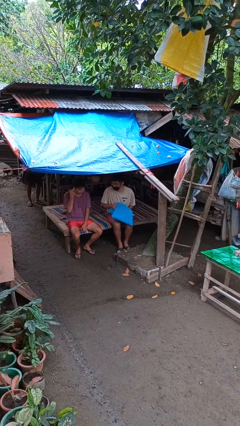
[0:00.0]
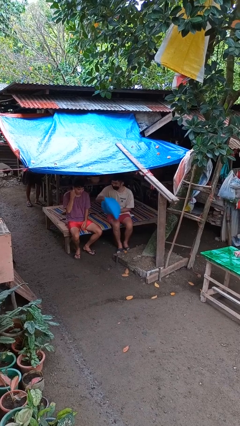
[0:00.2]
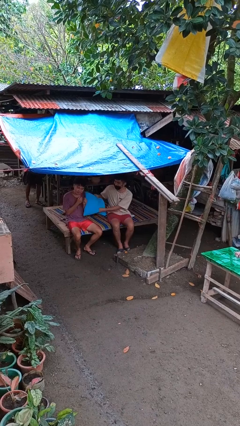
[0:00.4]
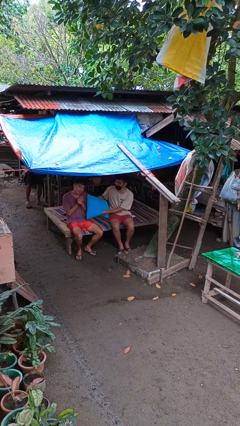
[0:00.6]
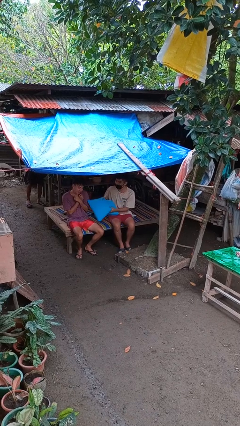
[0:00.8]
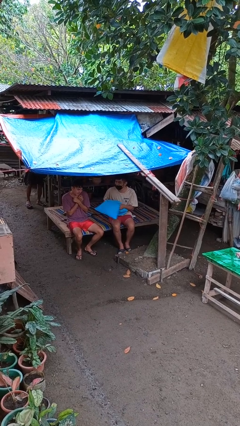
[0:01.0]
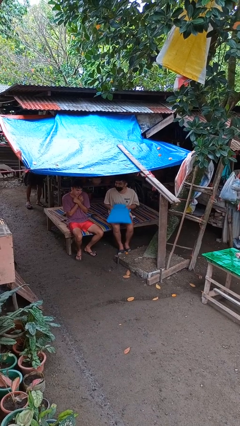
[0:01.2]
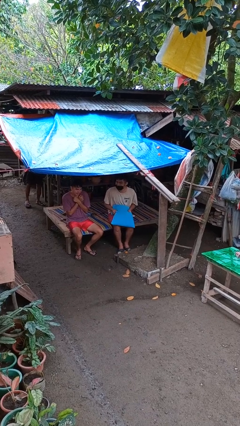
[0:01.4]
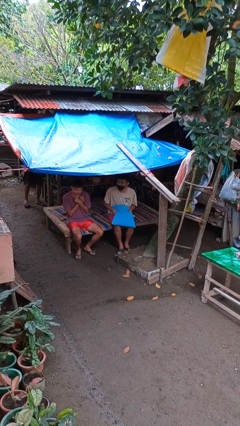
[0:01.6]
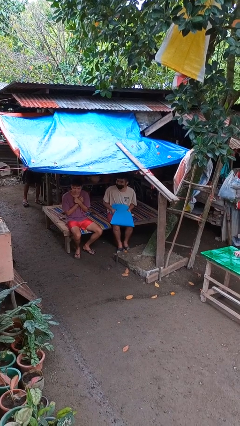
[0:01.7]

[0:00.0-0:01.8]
person hits person with pillow

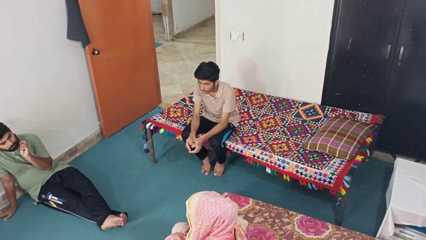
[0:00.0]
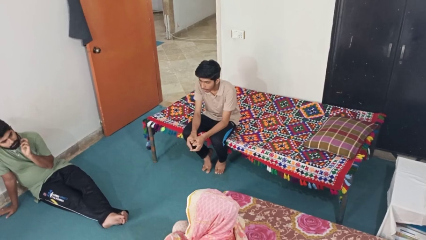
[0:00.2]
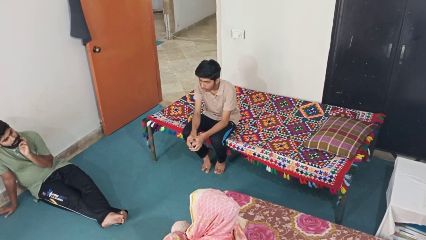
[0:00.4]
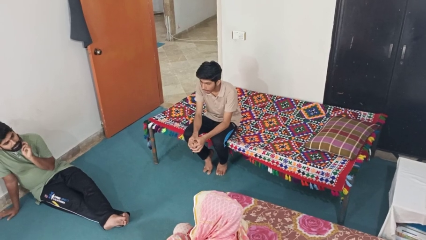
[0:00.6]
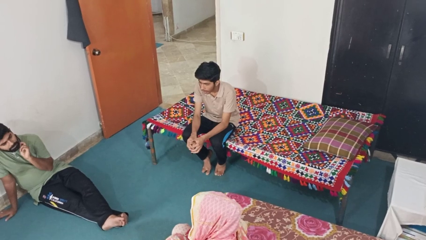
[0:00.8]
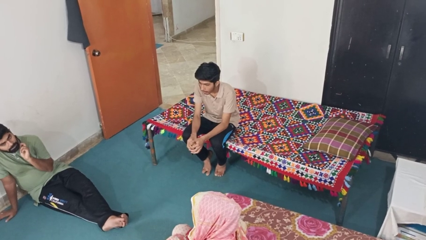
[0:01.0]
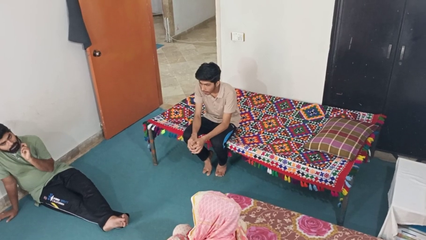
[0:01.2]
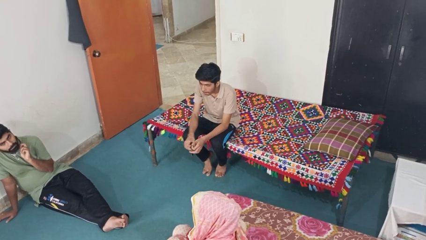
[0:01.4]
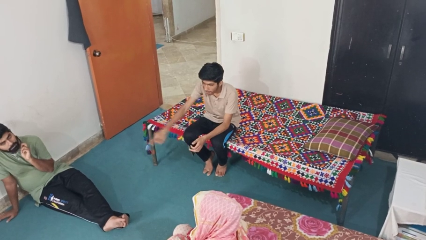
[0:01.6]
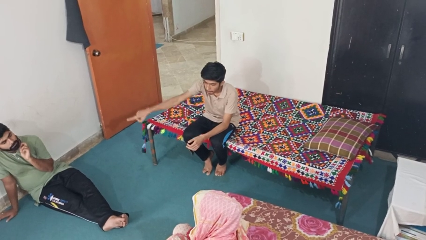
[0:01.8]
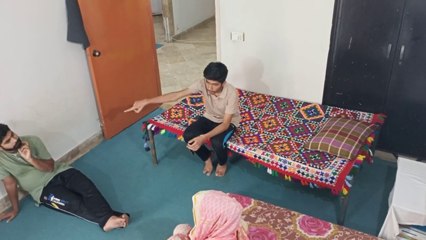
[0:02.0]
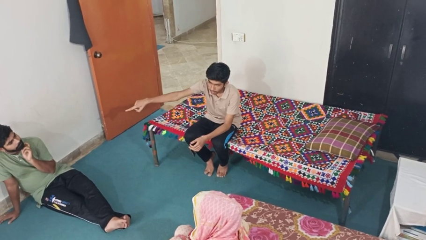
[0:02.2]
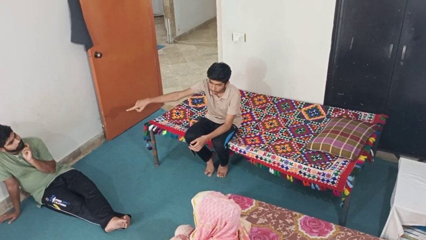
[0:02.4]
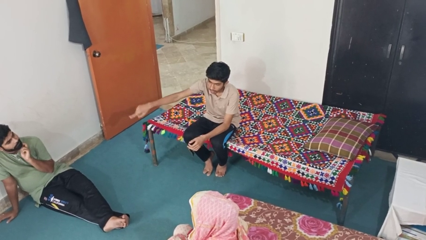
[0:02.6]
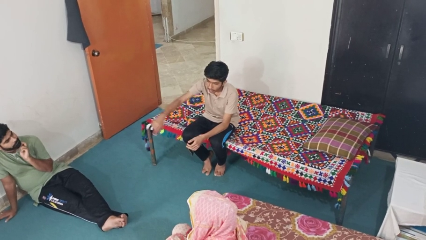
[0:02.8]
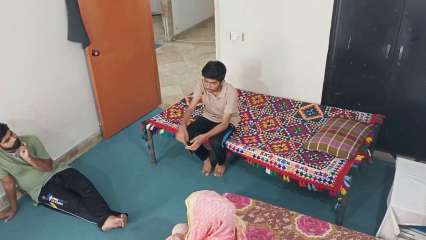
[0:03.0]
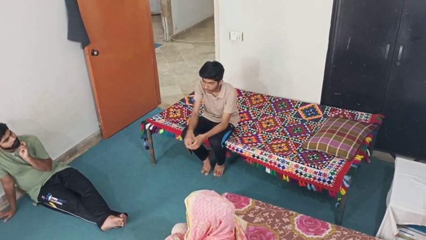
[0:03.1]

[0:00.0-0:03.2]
person points at person

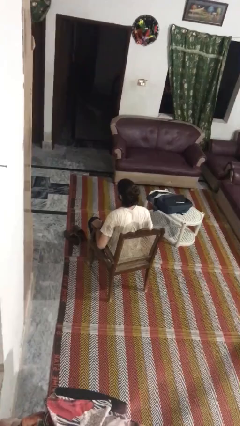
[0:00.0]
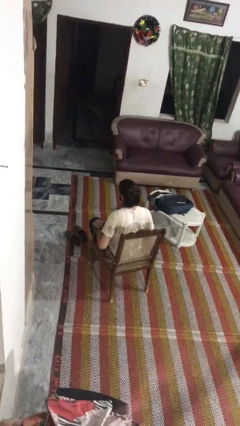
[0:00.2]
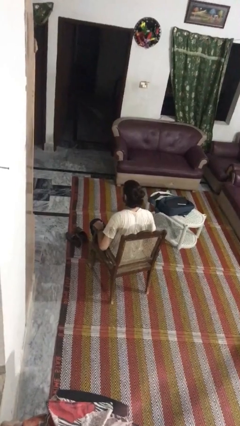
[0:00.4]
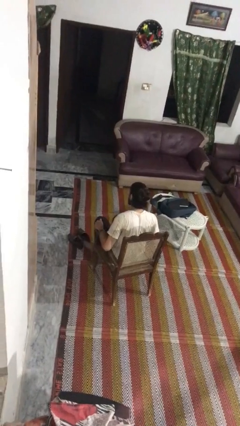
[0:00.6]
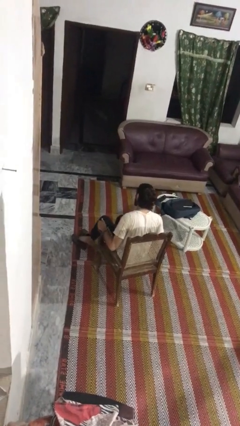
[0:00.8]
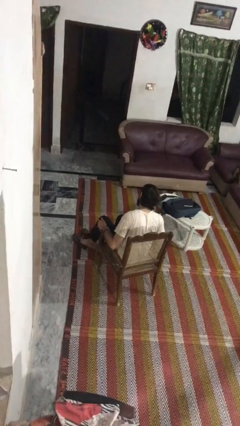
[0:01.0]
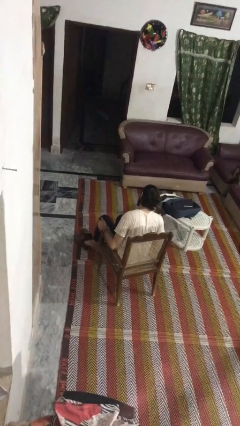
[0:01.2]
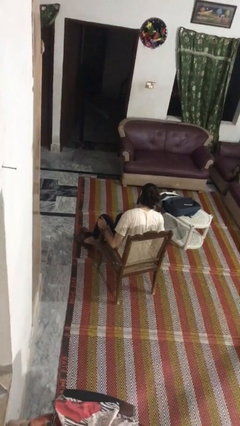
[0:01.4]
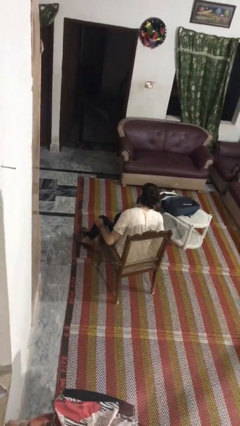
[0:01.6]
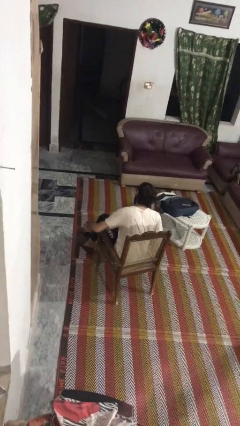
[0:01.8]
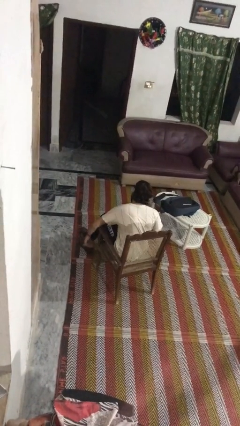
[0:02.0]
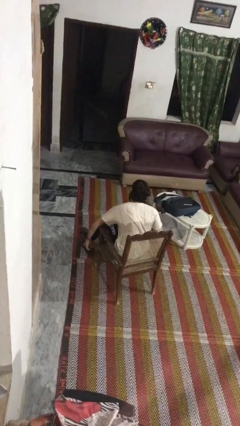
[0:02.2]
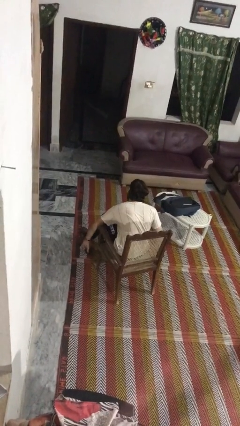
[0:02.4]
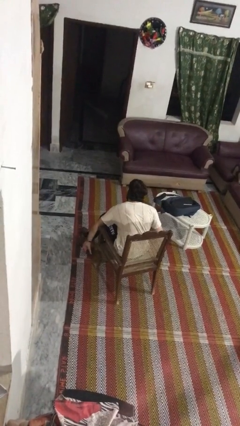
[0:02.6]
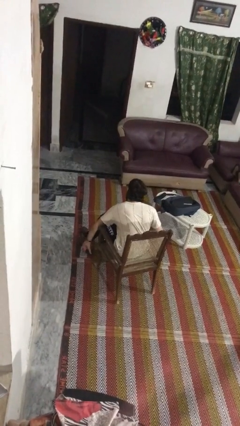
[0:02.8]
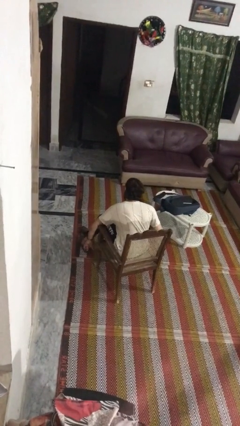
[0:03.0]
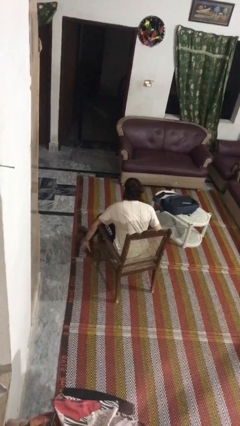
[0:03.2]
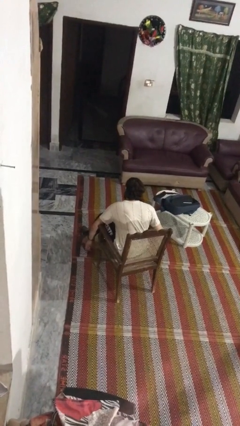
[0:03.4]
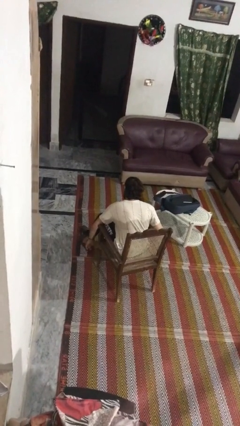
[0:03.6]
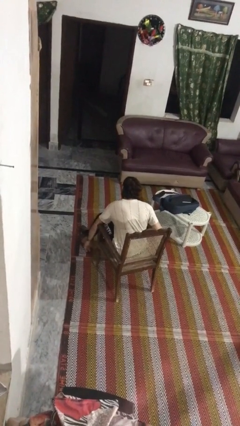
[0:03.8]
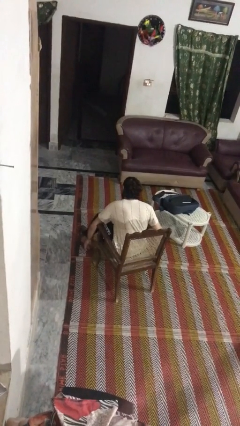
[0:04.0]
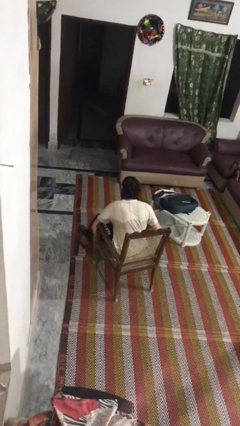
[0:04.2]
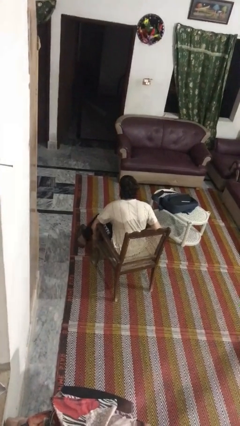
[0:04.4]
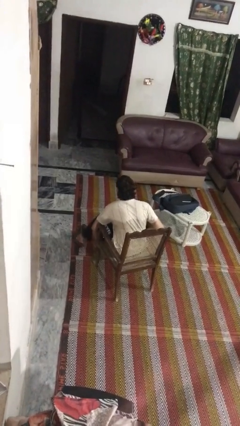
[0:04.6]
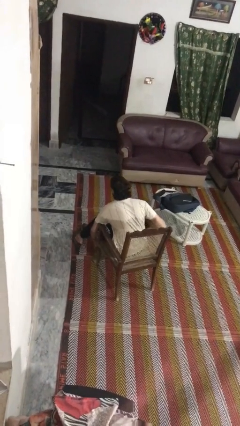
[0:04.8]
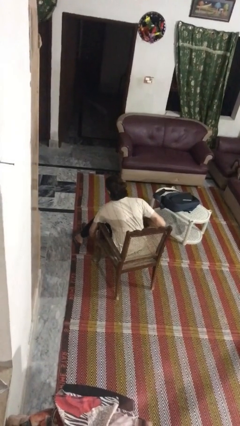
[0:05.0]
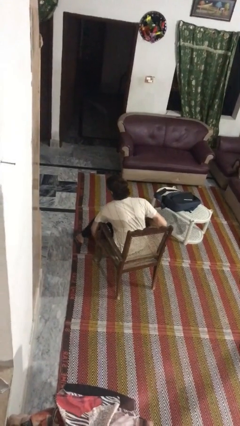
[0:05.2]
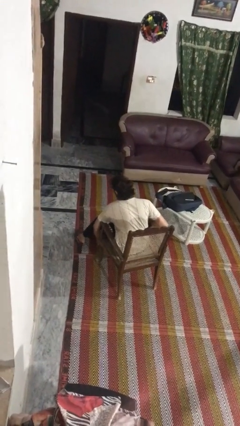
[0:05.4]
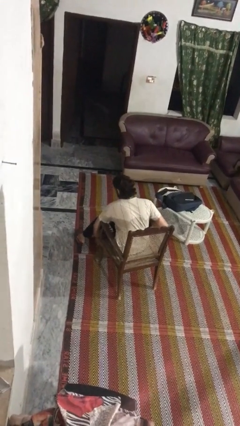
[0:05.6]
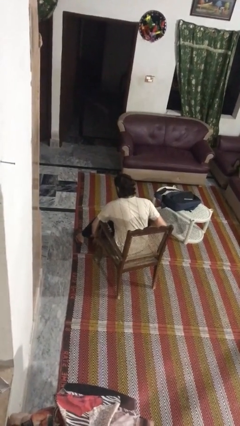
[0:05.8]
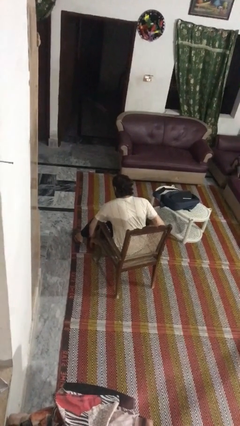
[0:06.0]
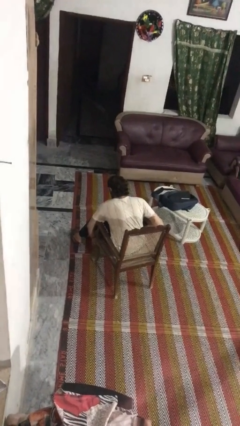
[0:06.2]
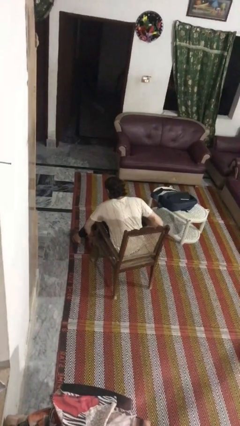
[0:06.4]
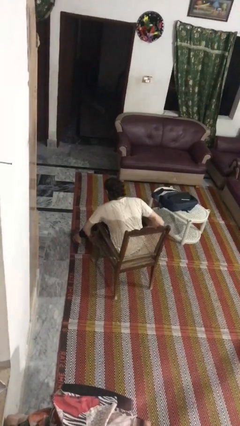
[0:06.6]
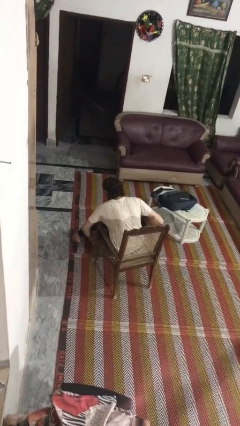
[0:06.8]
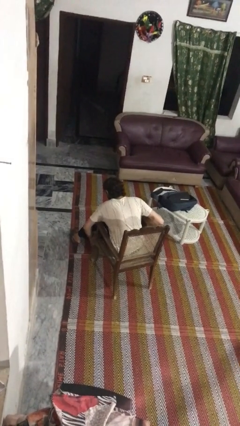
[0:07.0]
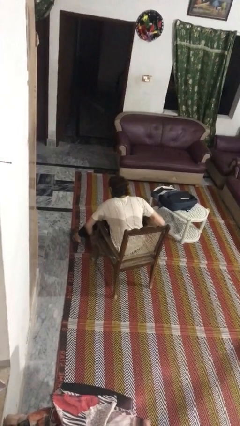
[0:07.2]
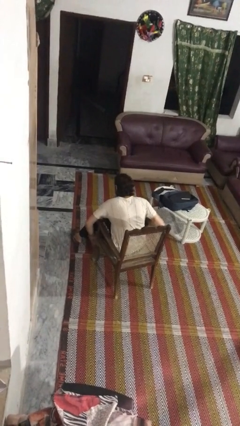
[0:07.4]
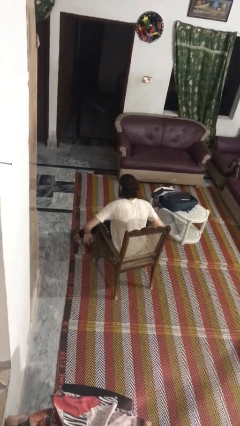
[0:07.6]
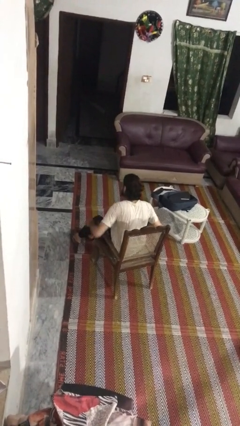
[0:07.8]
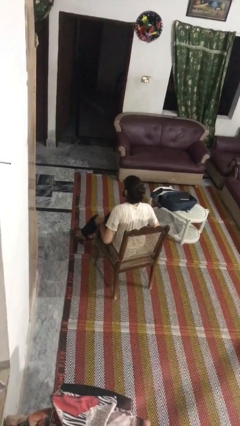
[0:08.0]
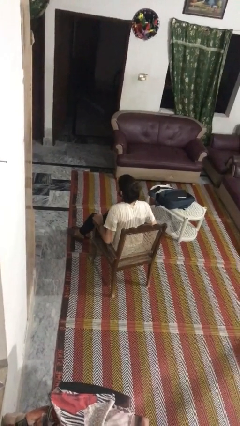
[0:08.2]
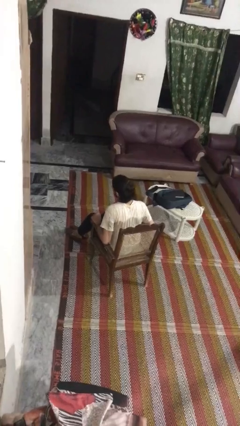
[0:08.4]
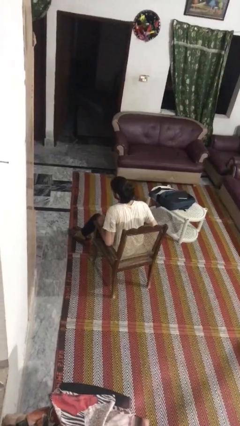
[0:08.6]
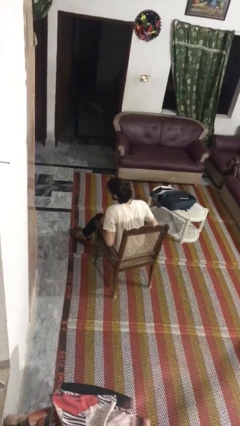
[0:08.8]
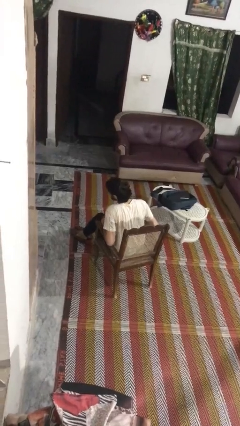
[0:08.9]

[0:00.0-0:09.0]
person puts on shoes

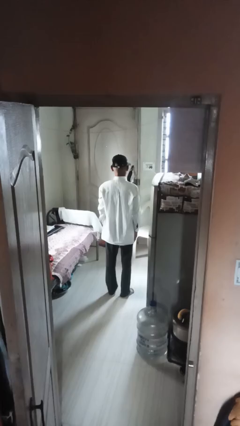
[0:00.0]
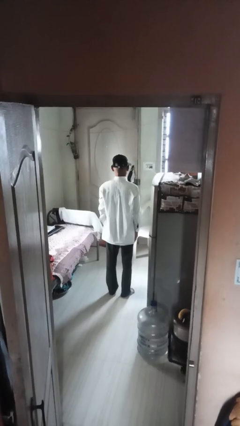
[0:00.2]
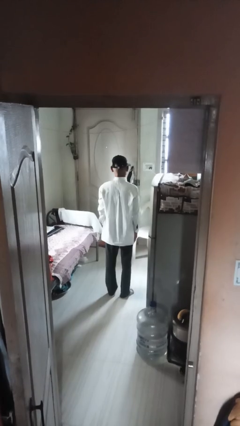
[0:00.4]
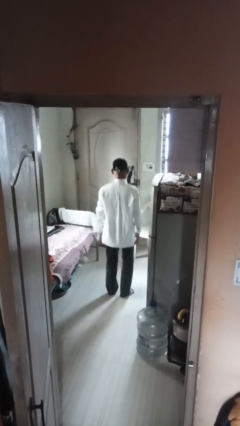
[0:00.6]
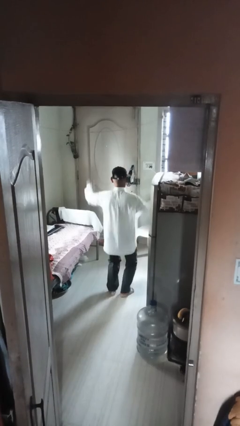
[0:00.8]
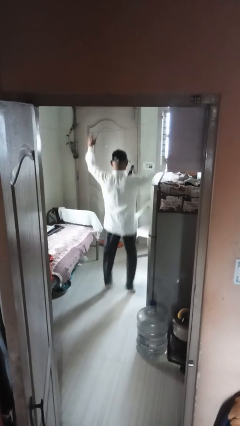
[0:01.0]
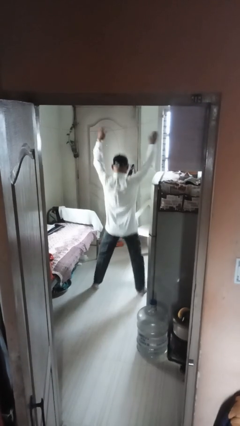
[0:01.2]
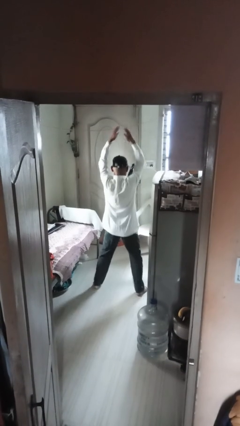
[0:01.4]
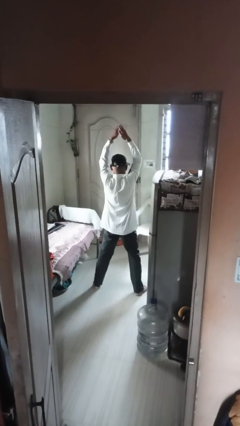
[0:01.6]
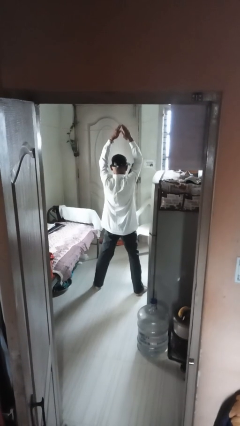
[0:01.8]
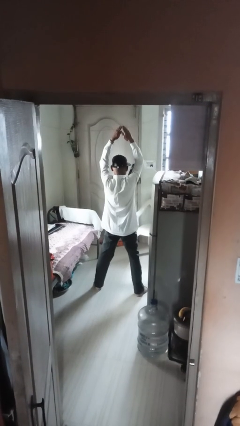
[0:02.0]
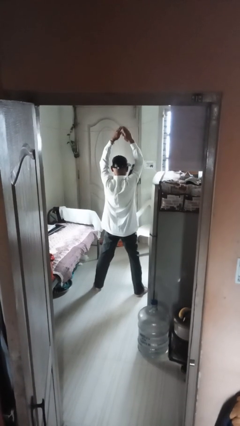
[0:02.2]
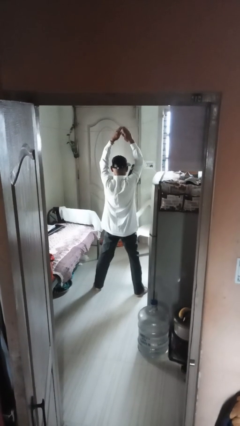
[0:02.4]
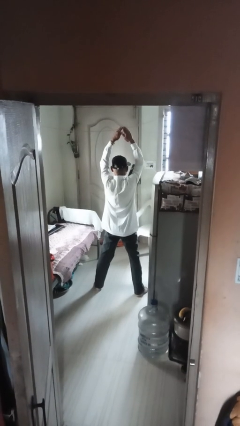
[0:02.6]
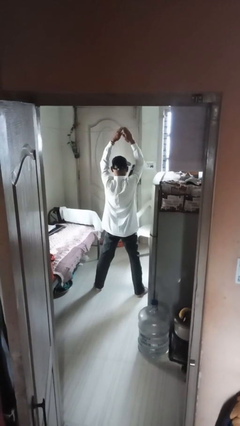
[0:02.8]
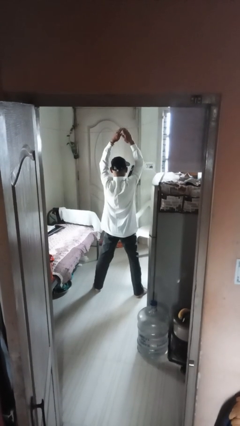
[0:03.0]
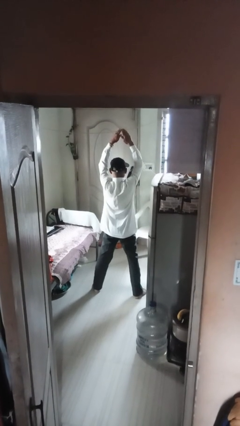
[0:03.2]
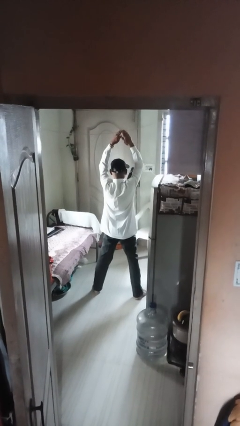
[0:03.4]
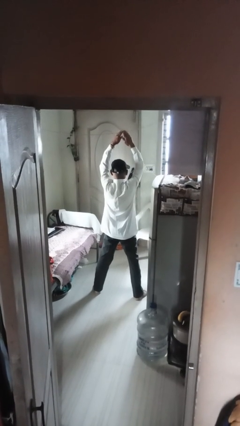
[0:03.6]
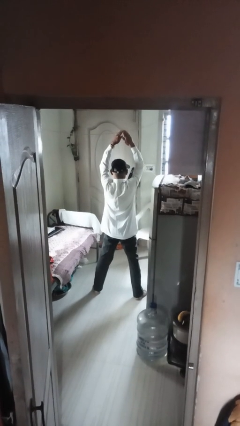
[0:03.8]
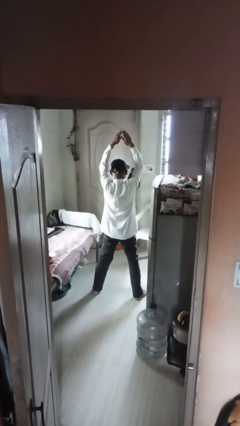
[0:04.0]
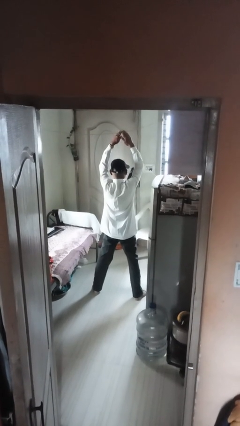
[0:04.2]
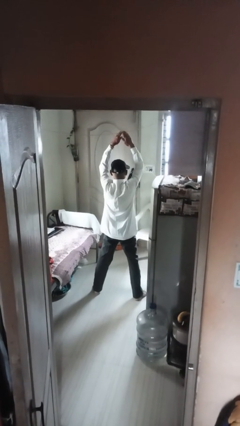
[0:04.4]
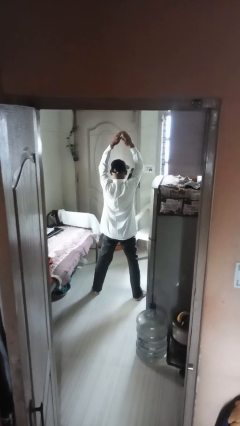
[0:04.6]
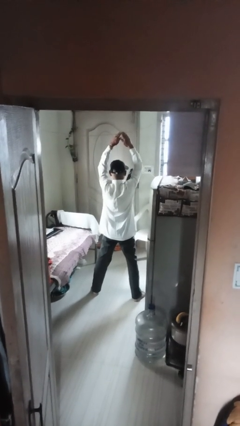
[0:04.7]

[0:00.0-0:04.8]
person exercises with jumping jacks
